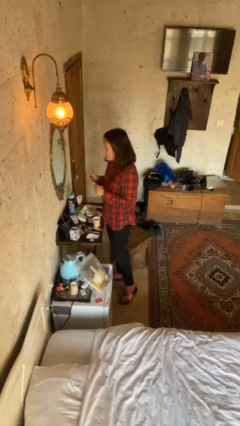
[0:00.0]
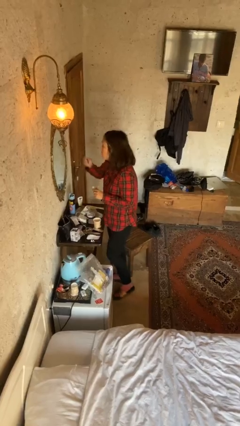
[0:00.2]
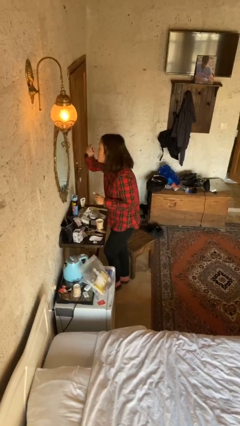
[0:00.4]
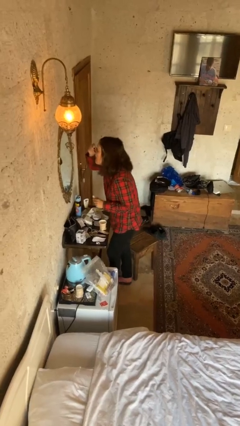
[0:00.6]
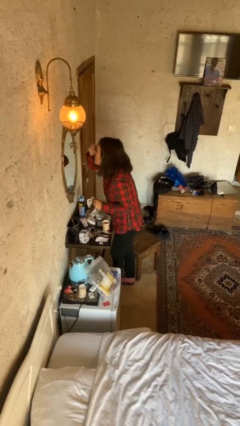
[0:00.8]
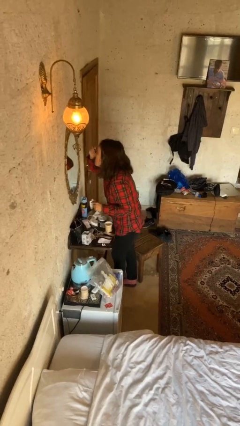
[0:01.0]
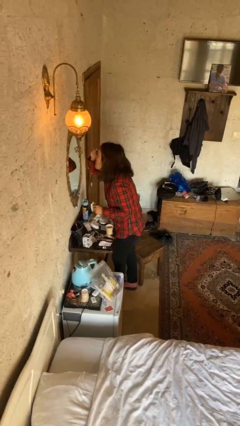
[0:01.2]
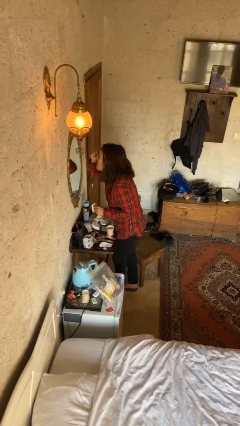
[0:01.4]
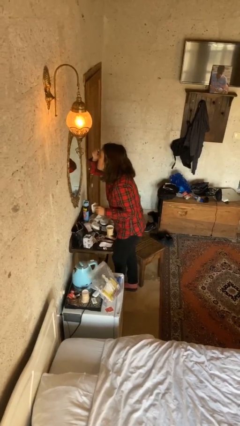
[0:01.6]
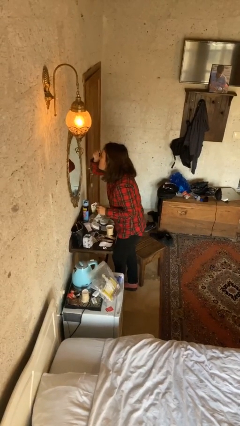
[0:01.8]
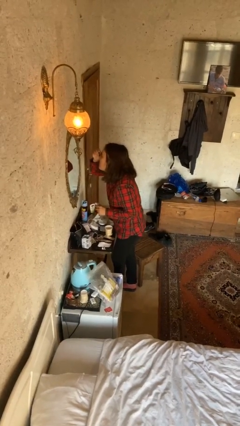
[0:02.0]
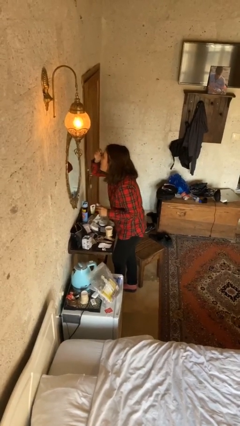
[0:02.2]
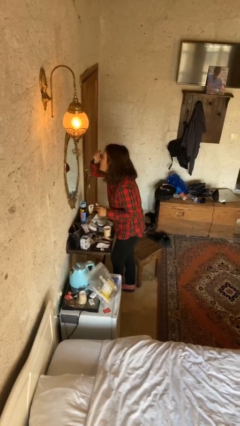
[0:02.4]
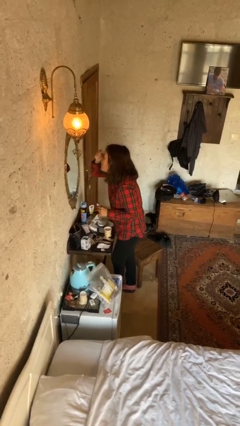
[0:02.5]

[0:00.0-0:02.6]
person applies eye makeup

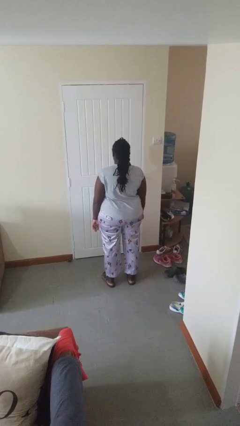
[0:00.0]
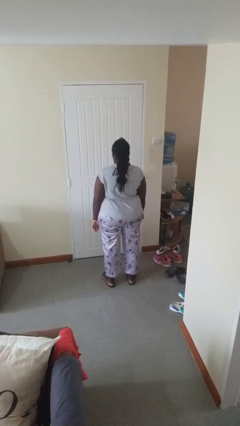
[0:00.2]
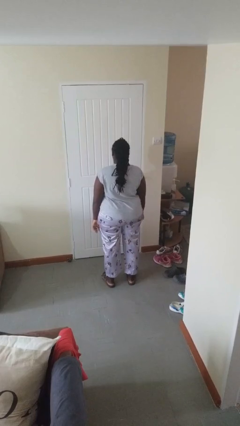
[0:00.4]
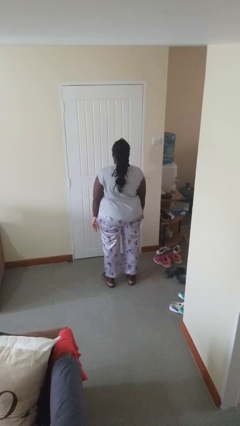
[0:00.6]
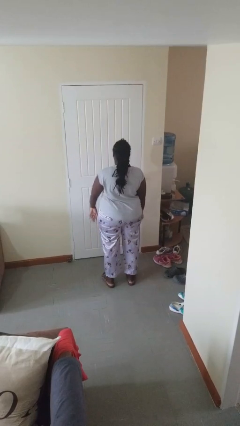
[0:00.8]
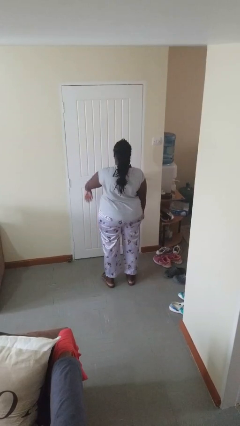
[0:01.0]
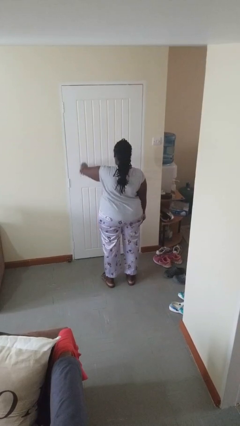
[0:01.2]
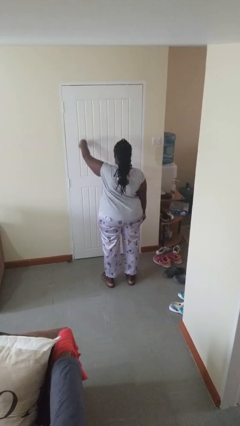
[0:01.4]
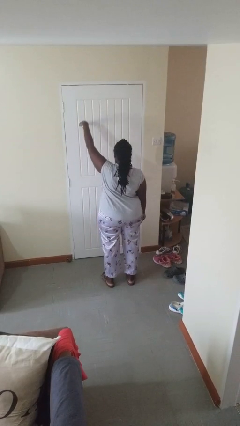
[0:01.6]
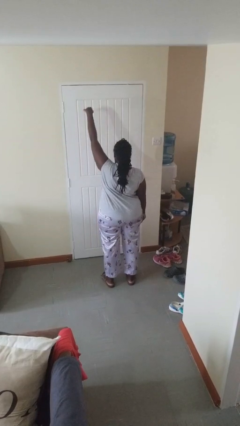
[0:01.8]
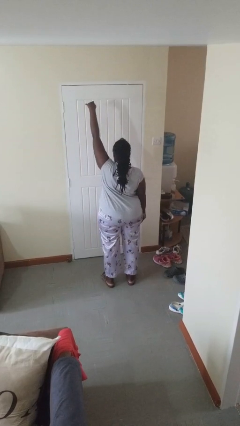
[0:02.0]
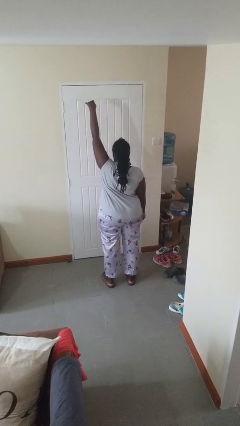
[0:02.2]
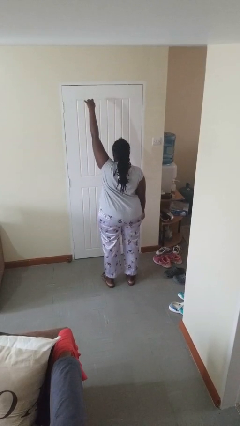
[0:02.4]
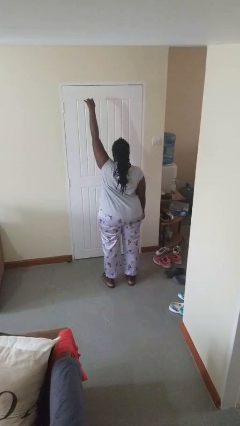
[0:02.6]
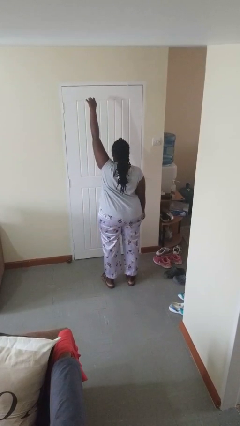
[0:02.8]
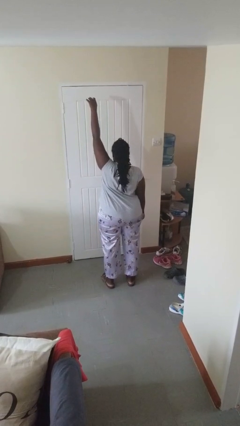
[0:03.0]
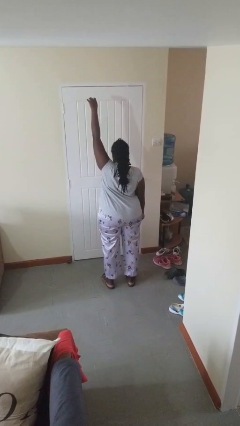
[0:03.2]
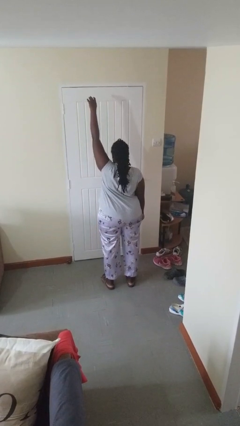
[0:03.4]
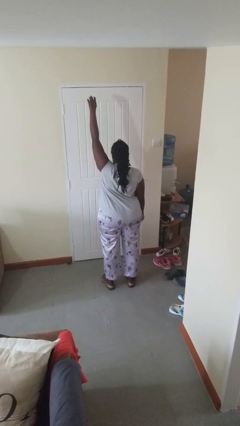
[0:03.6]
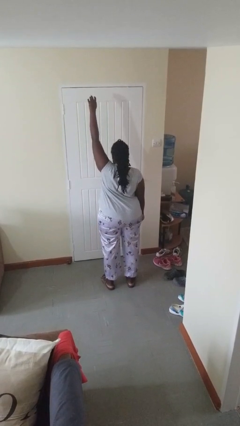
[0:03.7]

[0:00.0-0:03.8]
person gestures swipe up

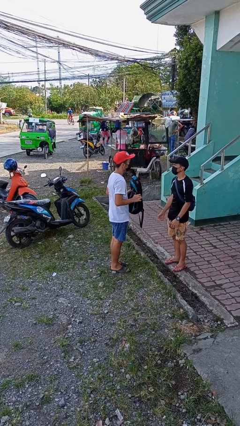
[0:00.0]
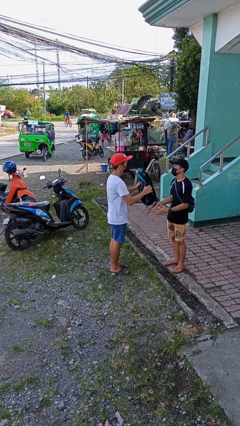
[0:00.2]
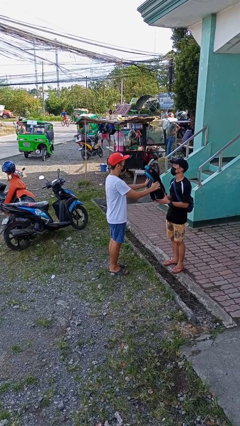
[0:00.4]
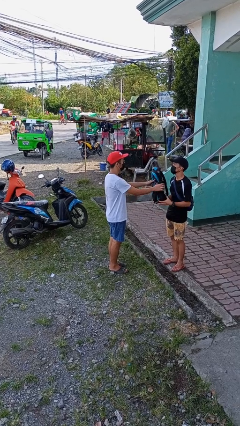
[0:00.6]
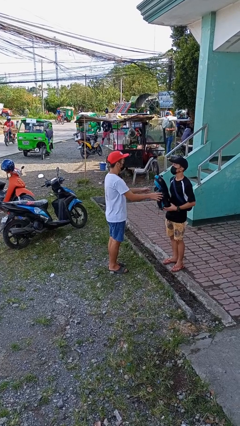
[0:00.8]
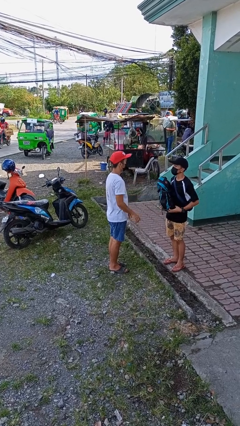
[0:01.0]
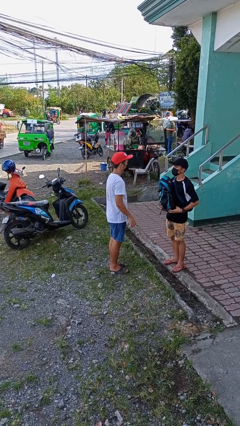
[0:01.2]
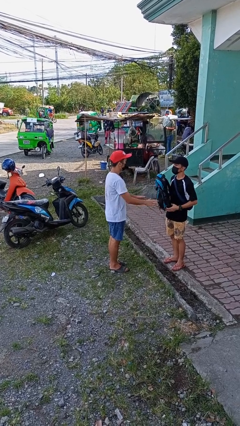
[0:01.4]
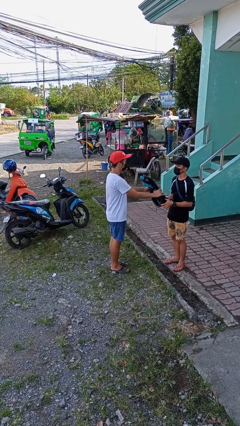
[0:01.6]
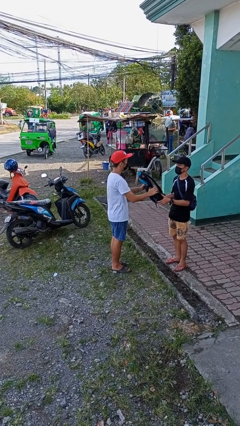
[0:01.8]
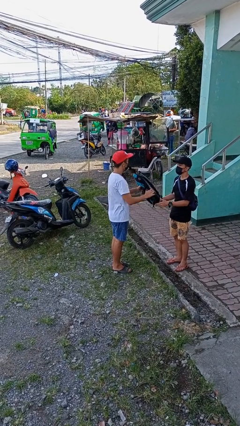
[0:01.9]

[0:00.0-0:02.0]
person transfers object to person

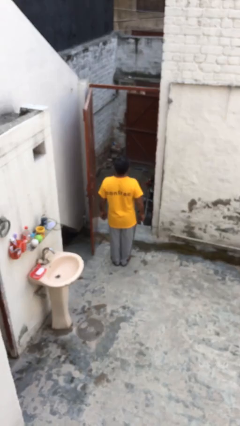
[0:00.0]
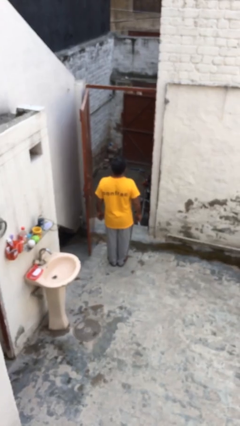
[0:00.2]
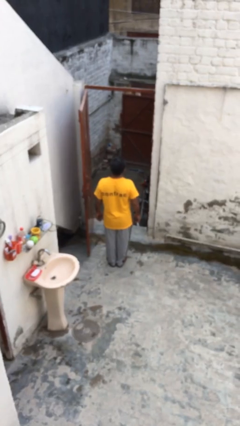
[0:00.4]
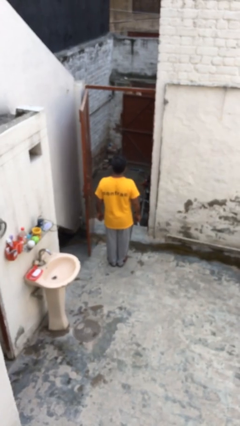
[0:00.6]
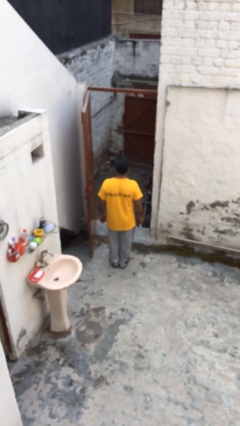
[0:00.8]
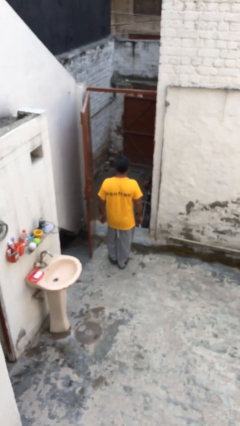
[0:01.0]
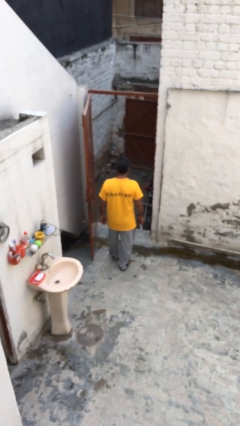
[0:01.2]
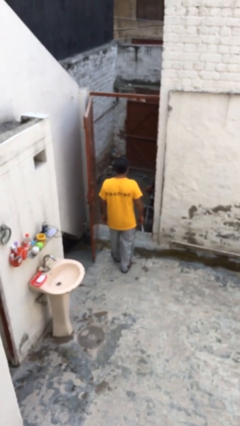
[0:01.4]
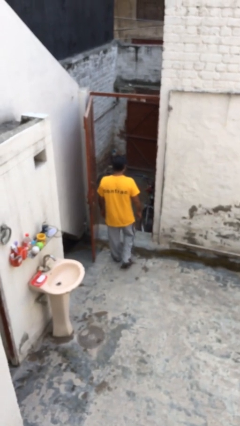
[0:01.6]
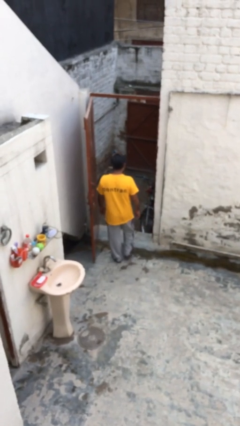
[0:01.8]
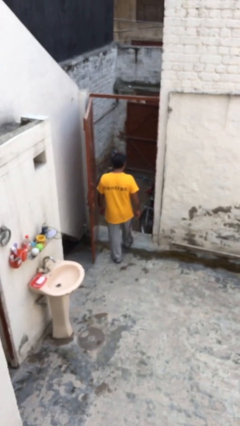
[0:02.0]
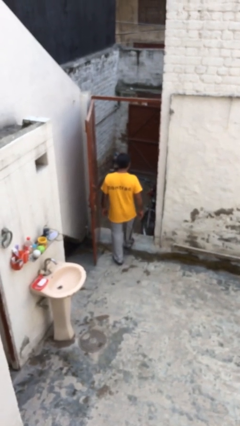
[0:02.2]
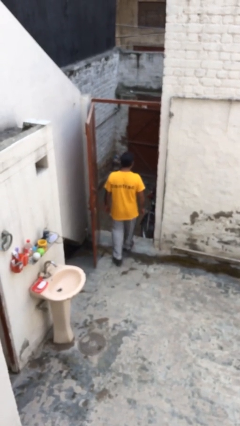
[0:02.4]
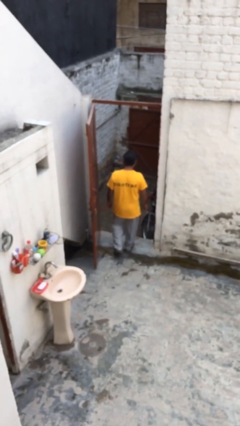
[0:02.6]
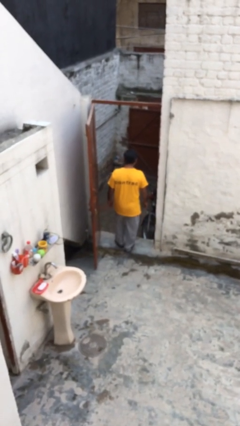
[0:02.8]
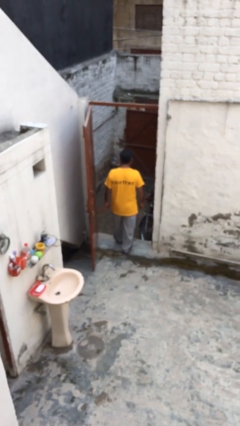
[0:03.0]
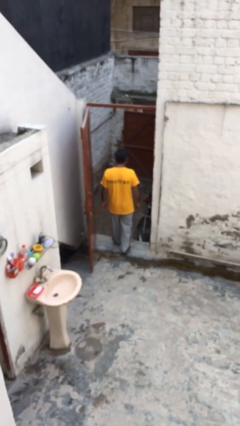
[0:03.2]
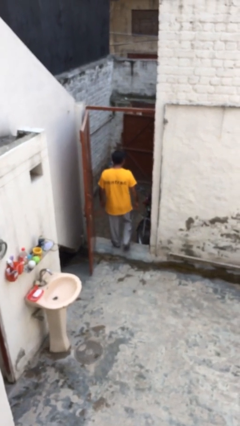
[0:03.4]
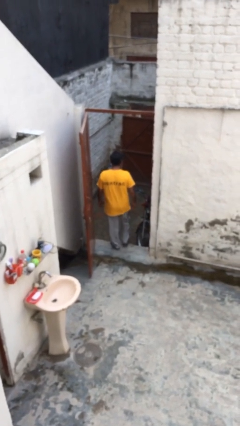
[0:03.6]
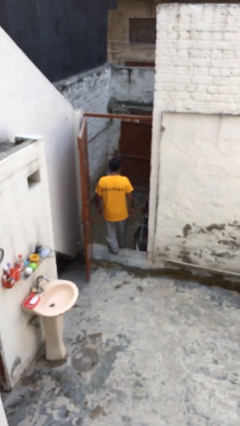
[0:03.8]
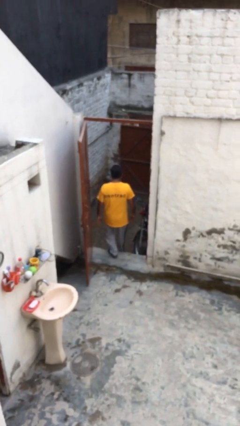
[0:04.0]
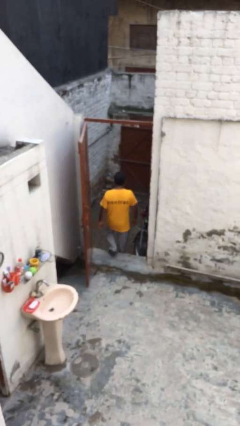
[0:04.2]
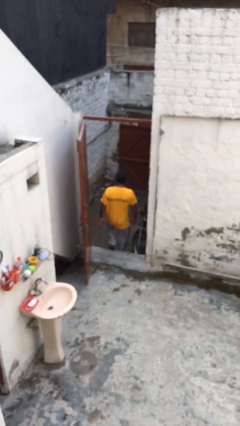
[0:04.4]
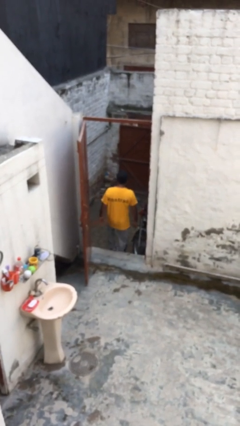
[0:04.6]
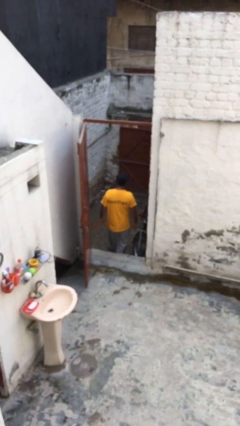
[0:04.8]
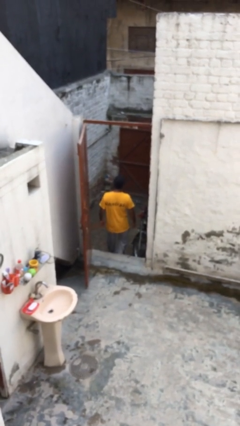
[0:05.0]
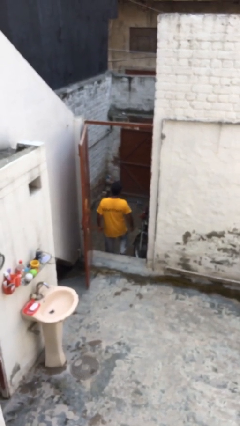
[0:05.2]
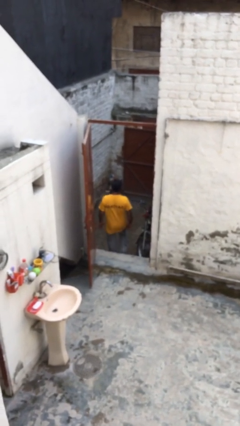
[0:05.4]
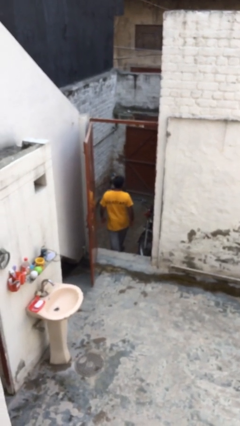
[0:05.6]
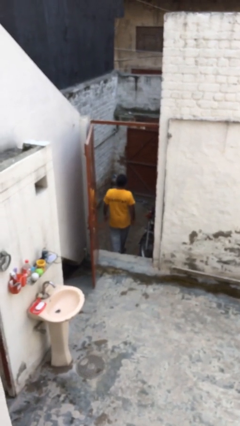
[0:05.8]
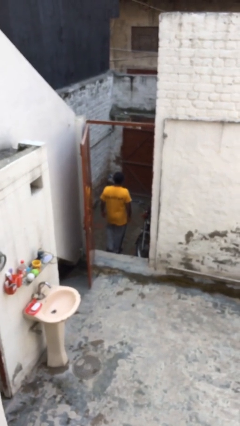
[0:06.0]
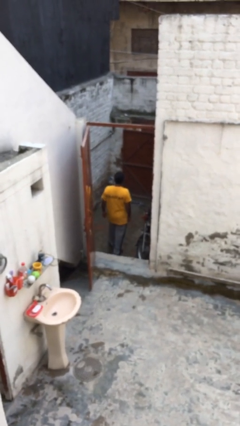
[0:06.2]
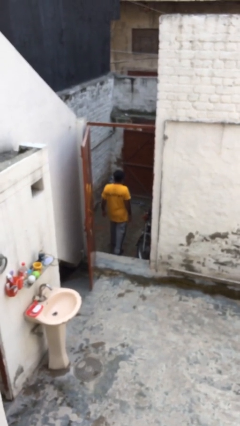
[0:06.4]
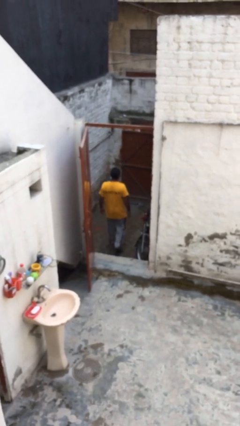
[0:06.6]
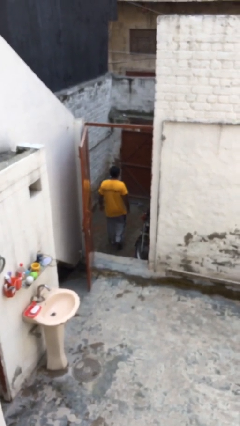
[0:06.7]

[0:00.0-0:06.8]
person exits scene through structure

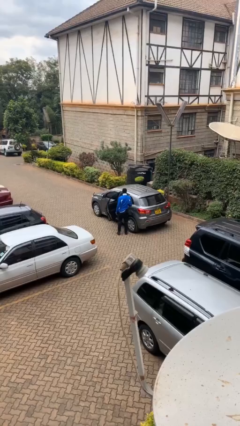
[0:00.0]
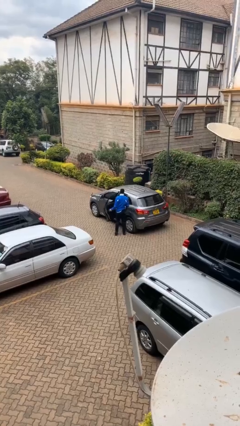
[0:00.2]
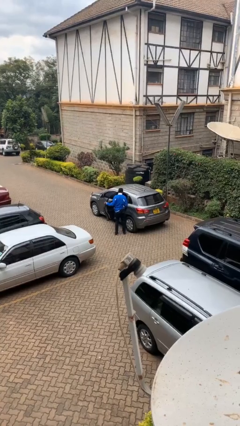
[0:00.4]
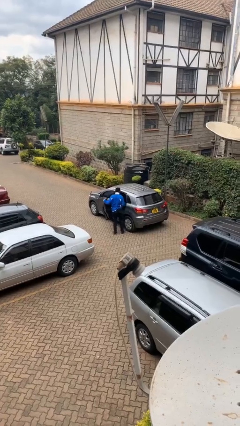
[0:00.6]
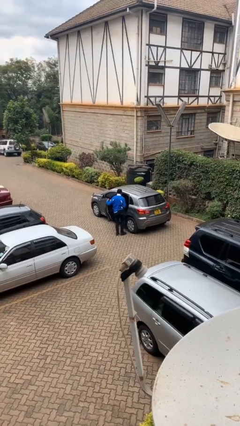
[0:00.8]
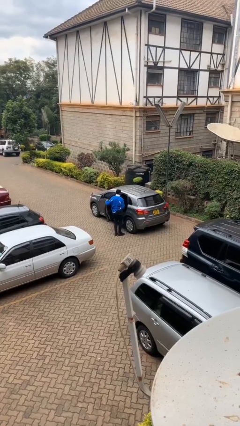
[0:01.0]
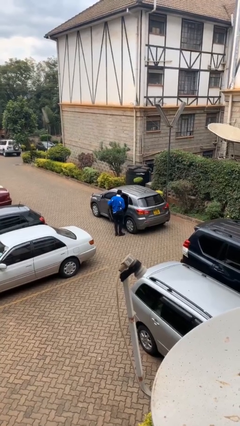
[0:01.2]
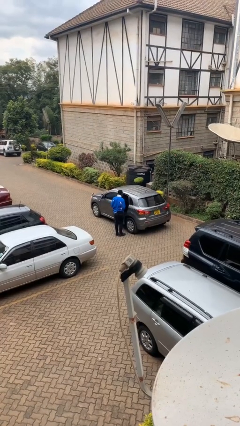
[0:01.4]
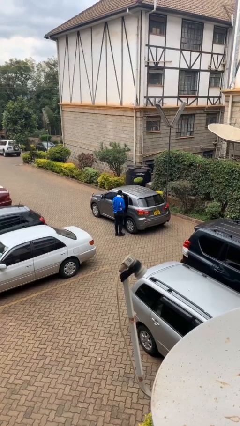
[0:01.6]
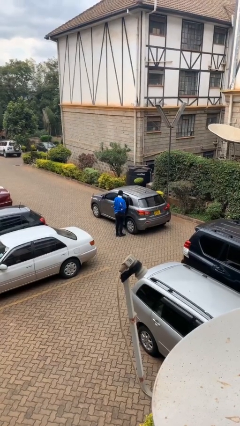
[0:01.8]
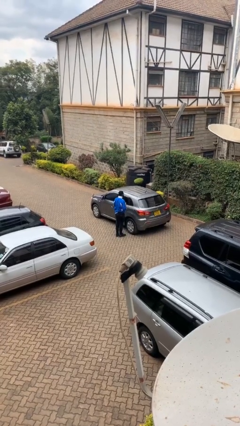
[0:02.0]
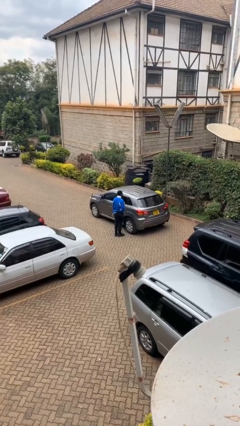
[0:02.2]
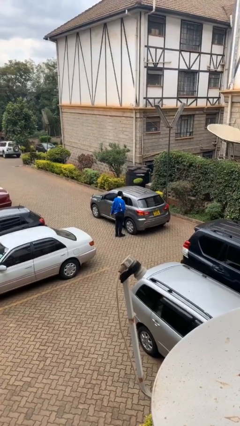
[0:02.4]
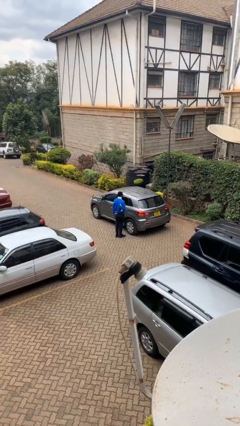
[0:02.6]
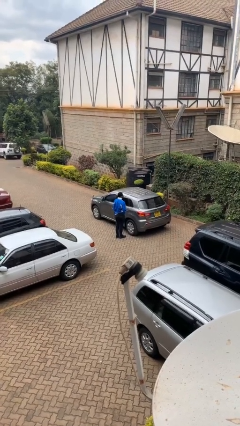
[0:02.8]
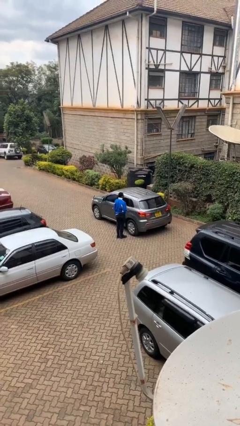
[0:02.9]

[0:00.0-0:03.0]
person closes car door
